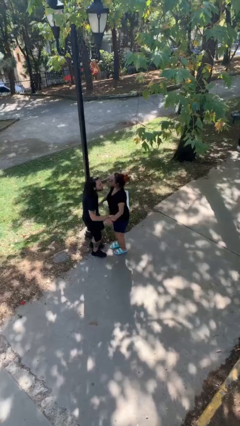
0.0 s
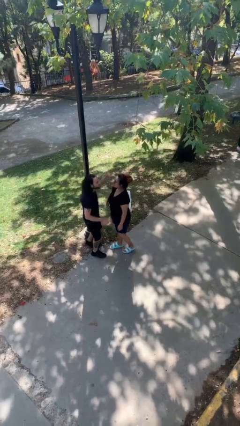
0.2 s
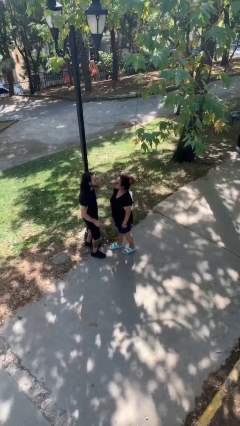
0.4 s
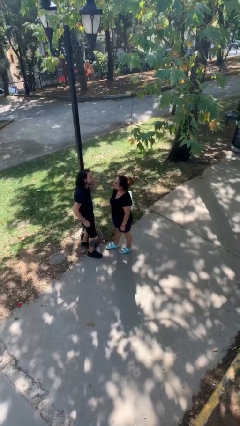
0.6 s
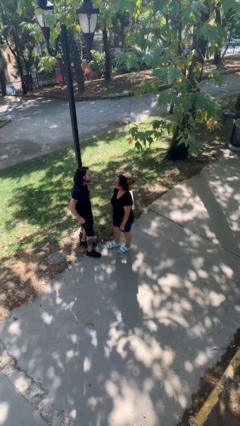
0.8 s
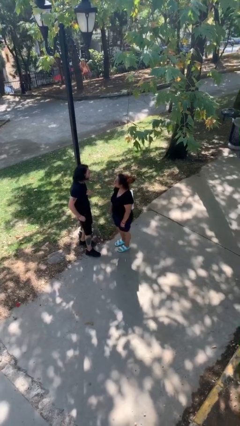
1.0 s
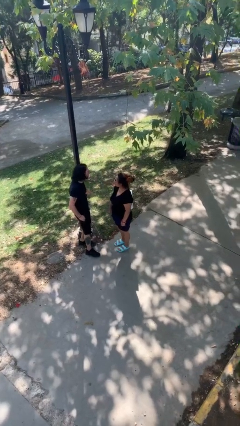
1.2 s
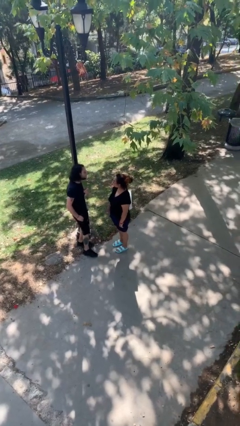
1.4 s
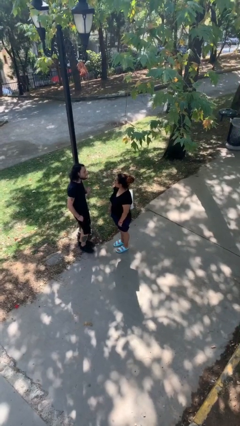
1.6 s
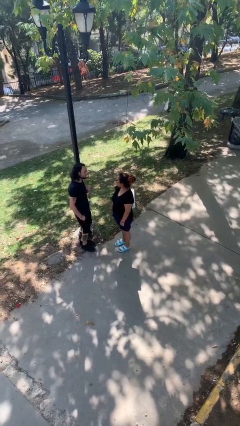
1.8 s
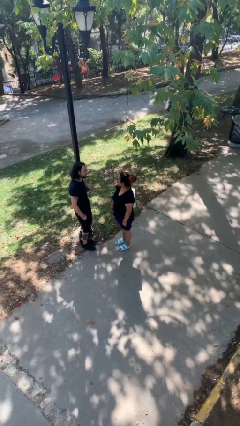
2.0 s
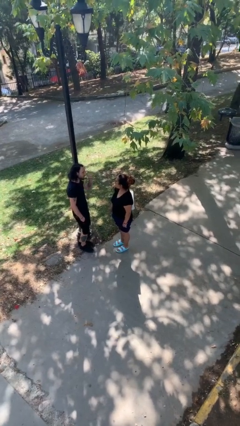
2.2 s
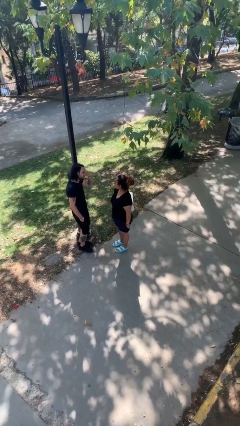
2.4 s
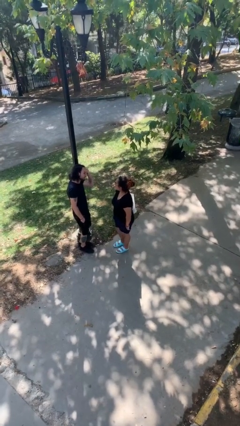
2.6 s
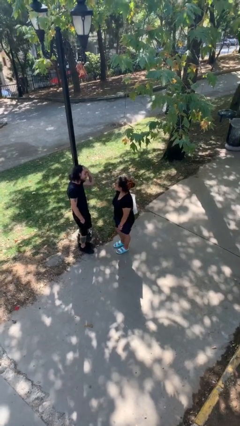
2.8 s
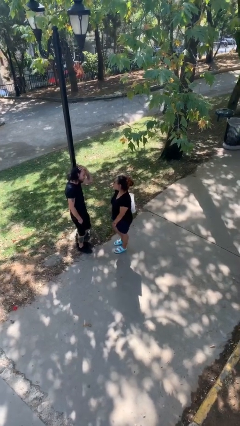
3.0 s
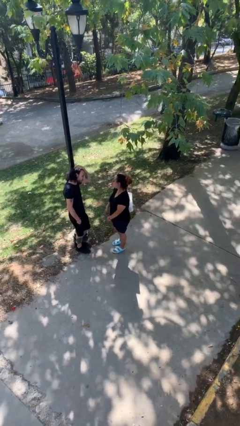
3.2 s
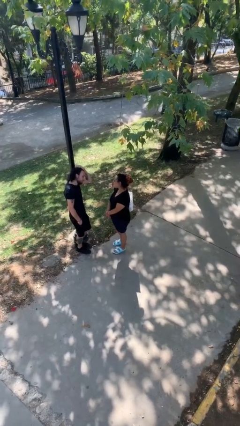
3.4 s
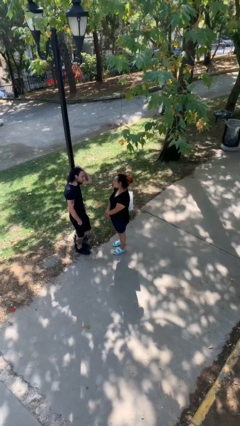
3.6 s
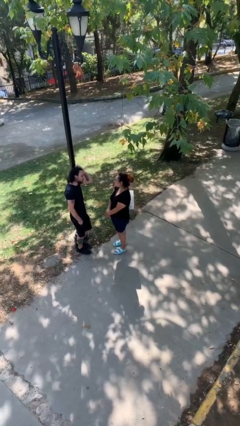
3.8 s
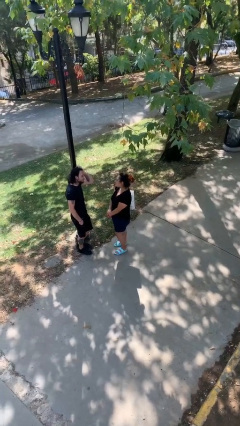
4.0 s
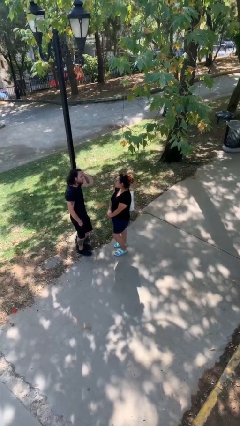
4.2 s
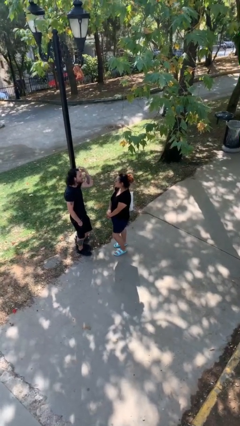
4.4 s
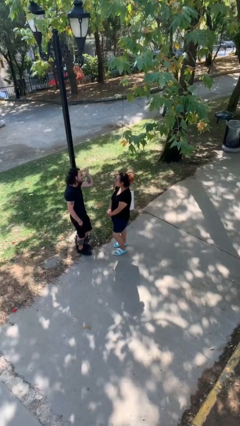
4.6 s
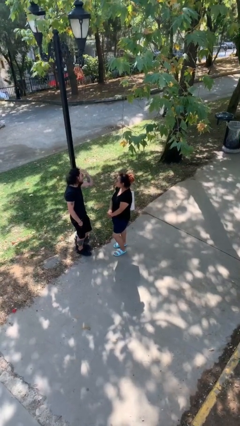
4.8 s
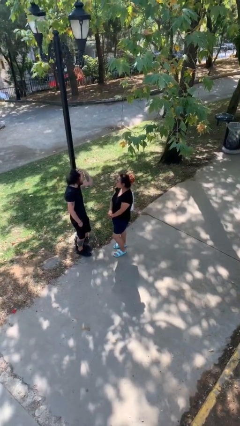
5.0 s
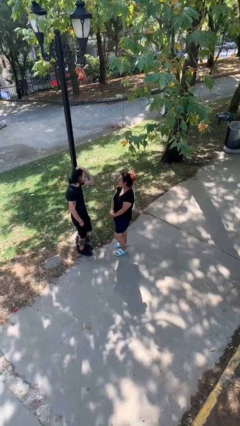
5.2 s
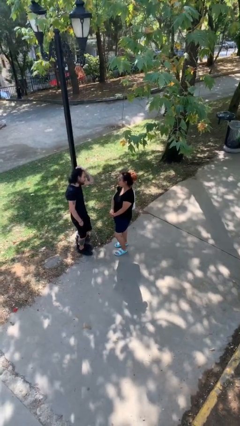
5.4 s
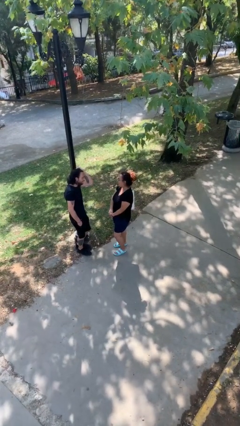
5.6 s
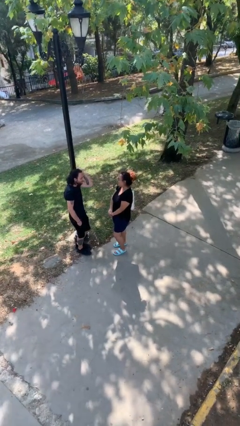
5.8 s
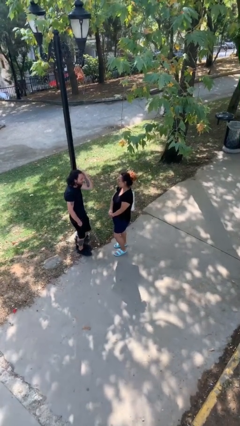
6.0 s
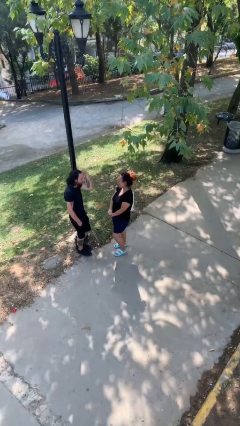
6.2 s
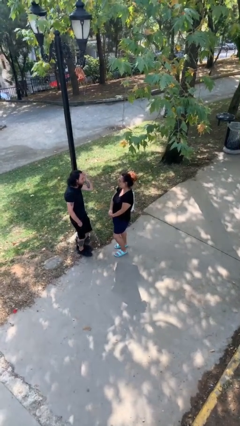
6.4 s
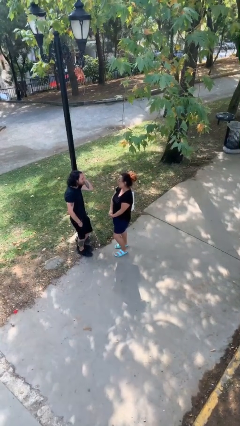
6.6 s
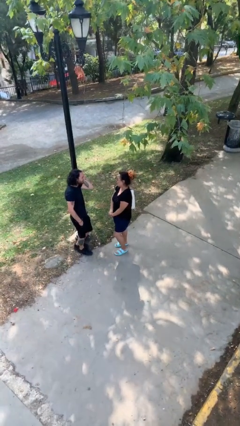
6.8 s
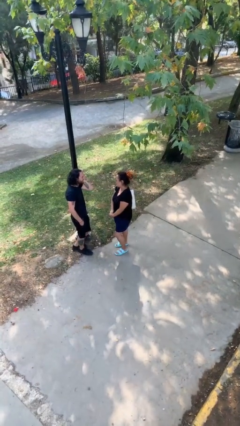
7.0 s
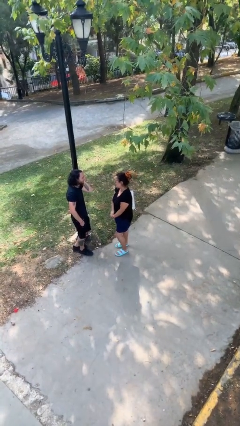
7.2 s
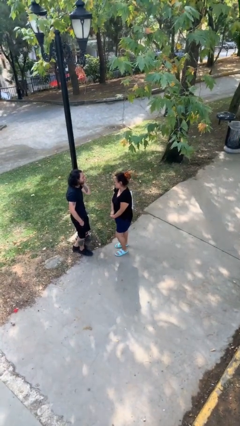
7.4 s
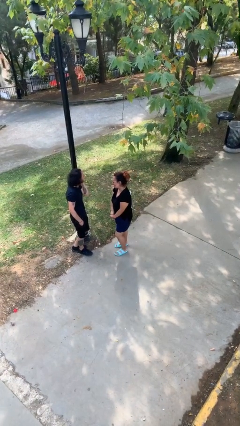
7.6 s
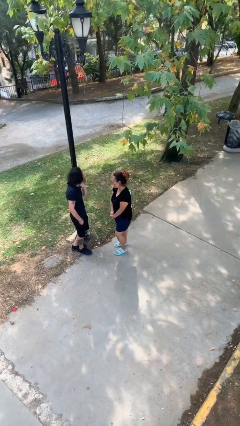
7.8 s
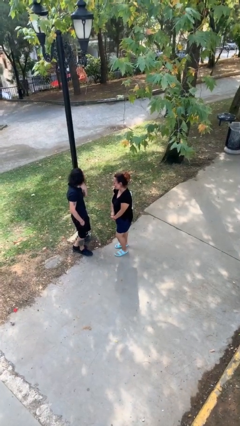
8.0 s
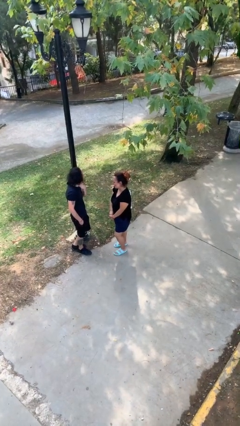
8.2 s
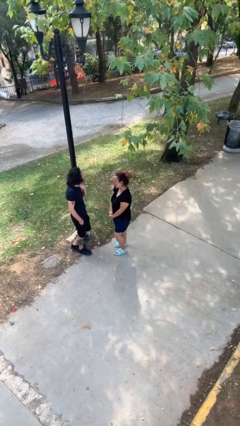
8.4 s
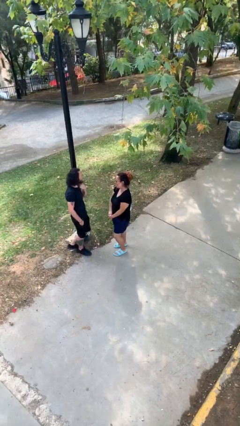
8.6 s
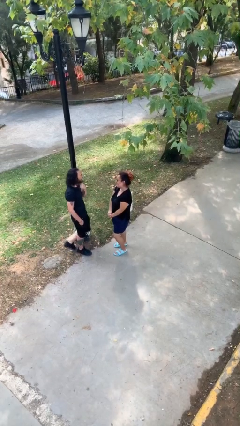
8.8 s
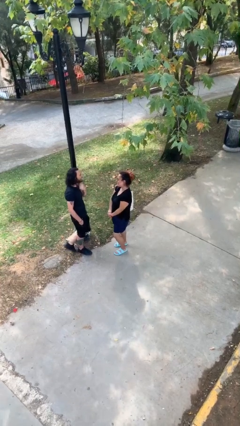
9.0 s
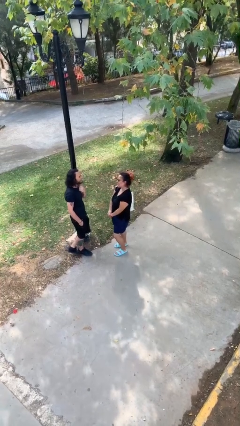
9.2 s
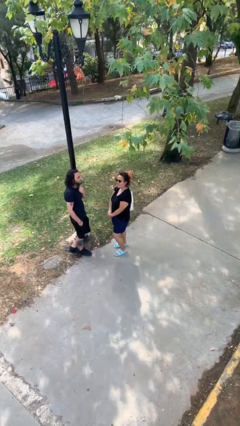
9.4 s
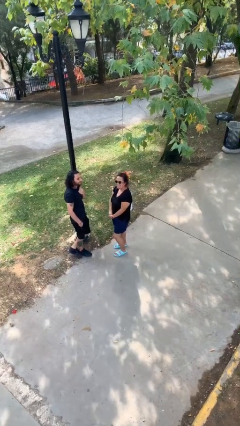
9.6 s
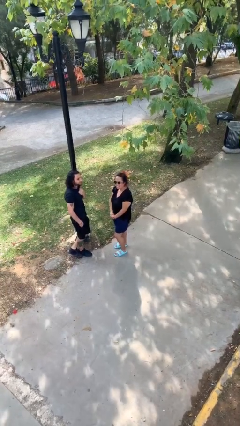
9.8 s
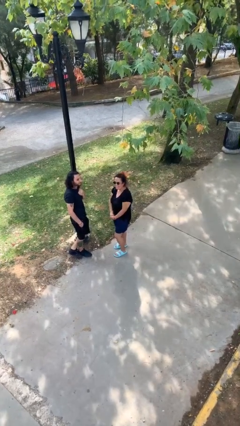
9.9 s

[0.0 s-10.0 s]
person talks to person

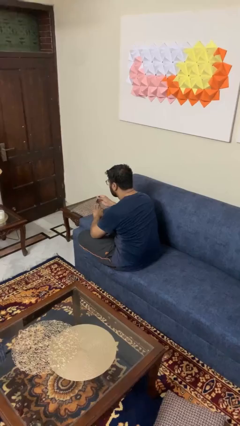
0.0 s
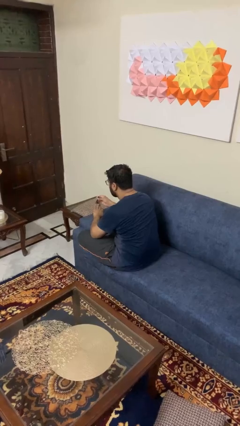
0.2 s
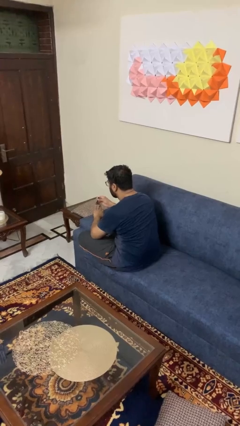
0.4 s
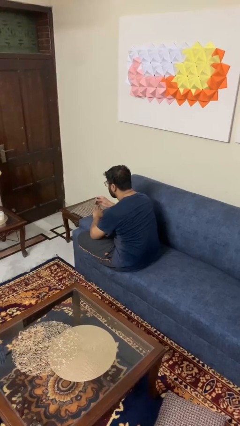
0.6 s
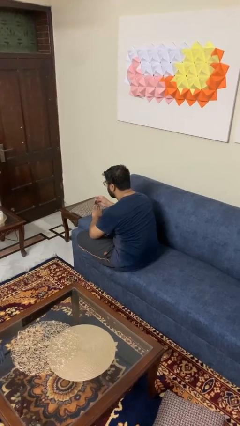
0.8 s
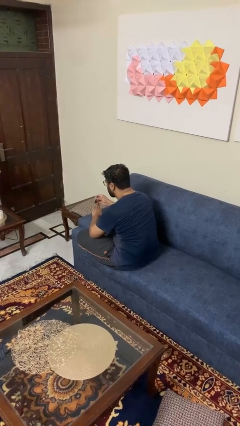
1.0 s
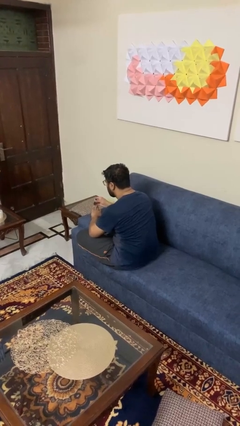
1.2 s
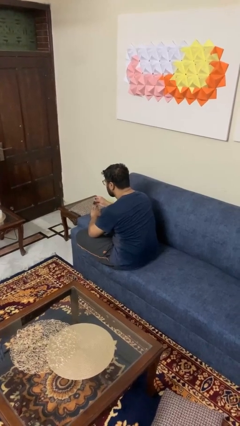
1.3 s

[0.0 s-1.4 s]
person clips fingernails

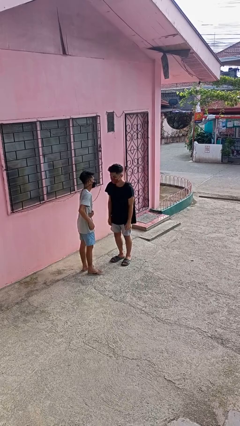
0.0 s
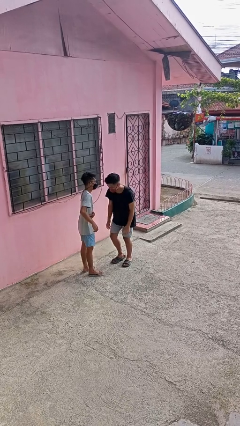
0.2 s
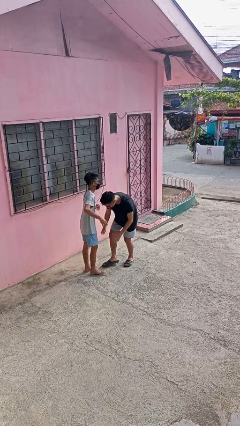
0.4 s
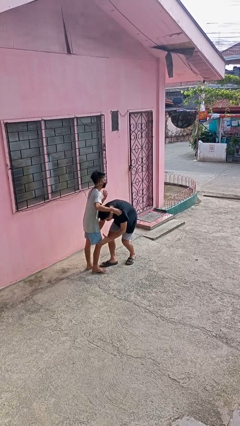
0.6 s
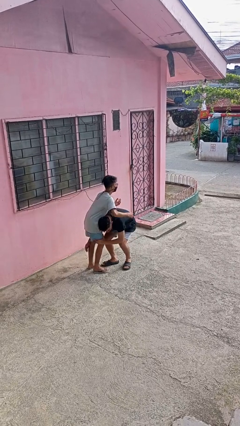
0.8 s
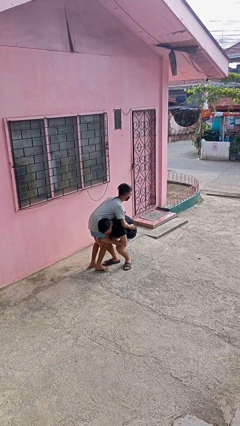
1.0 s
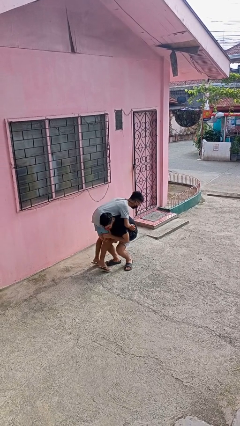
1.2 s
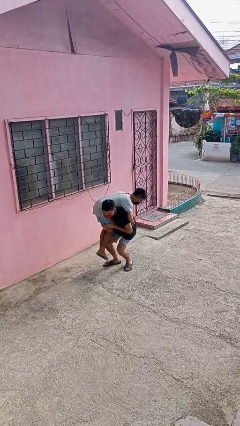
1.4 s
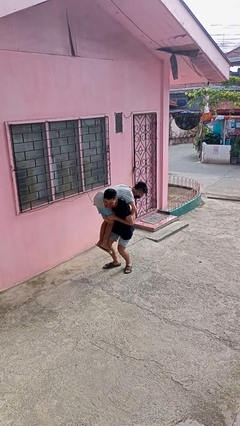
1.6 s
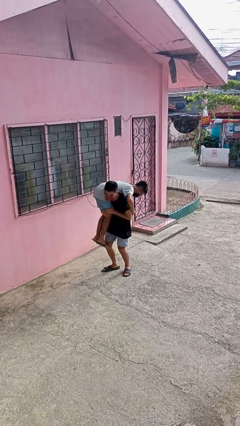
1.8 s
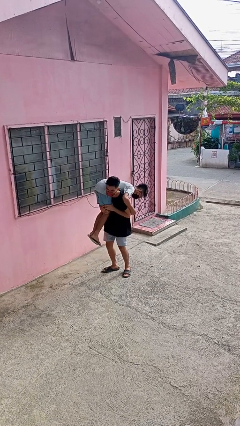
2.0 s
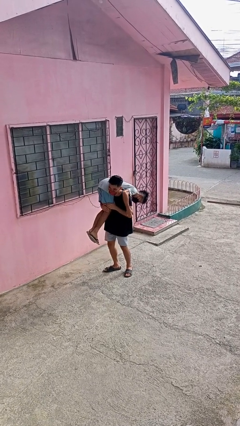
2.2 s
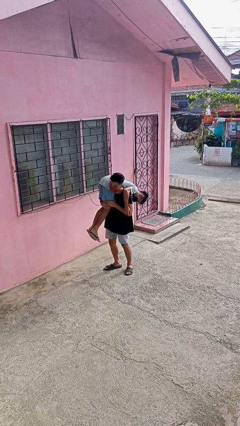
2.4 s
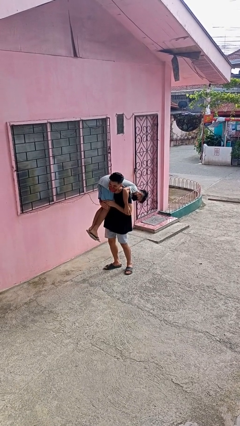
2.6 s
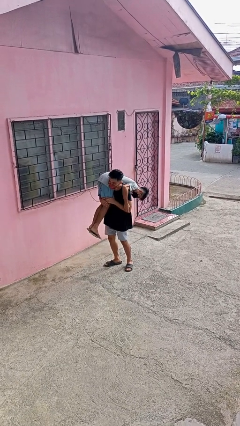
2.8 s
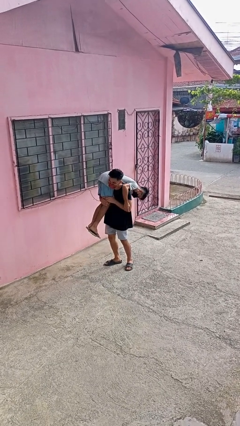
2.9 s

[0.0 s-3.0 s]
person carries person over shoulder

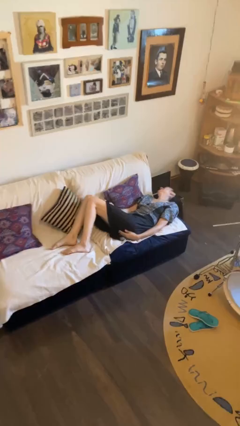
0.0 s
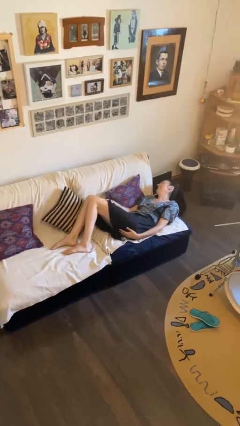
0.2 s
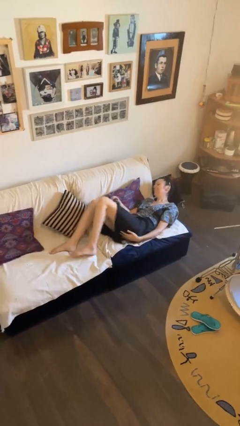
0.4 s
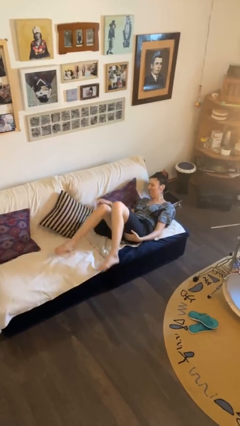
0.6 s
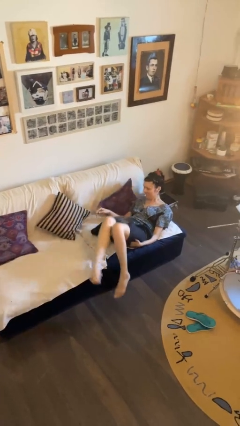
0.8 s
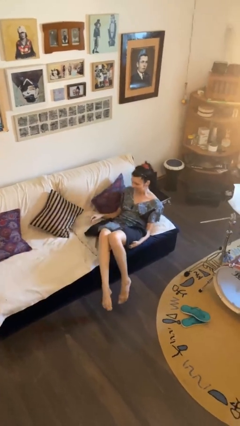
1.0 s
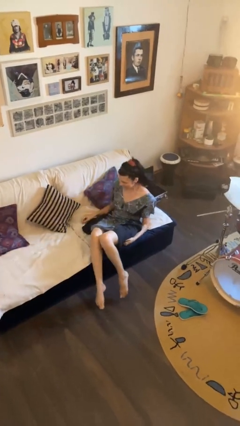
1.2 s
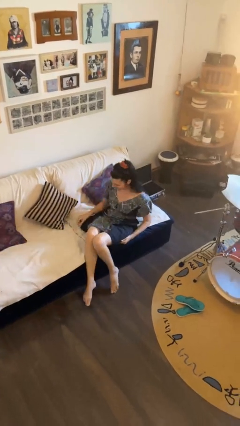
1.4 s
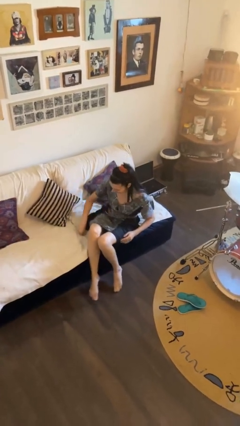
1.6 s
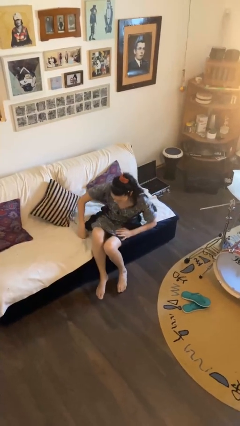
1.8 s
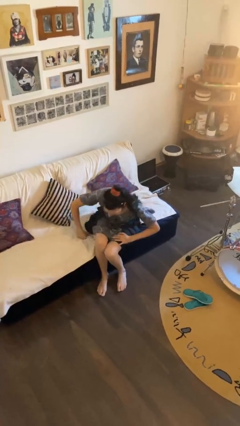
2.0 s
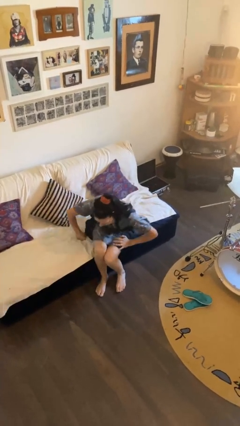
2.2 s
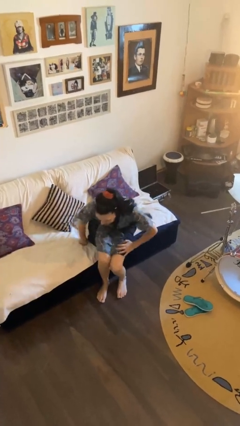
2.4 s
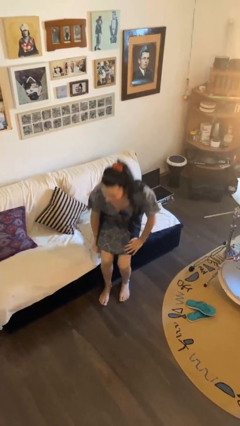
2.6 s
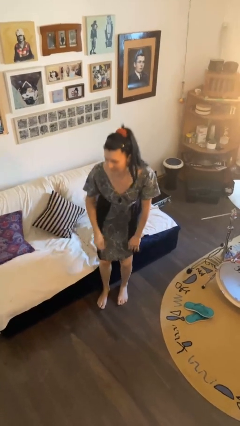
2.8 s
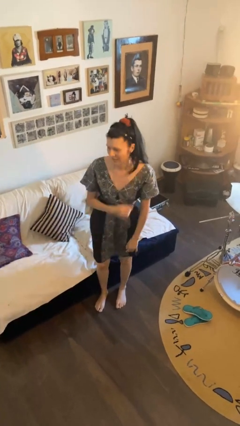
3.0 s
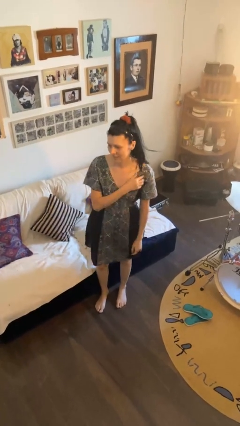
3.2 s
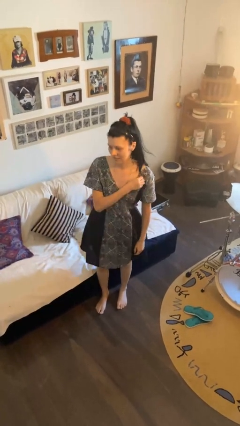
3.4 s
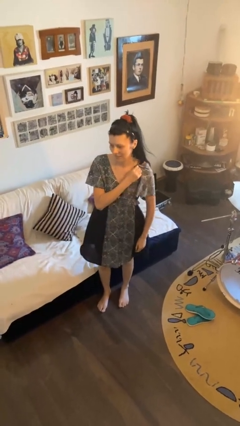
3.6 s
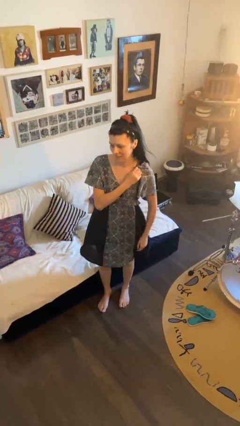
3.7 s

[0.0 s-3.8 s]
person stands up
